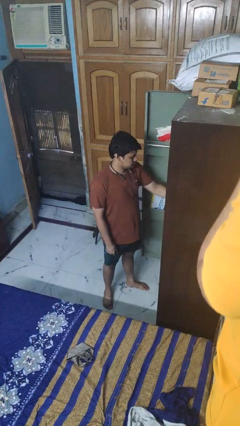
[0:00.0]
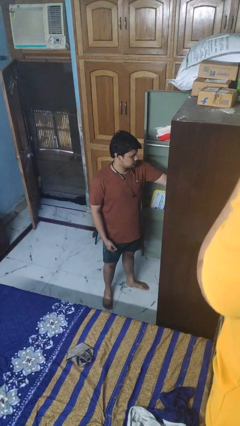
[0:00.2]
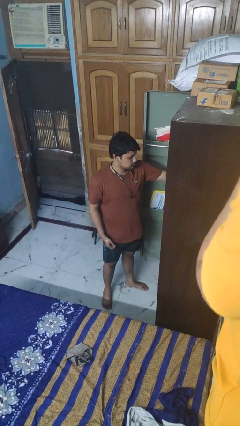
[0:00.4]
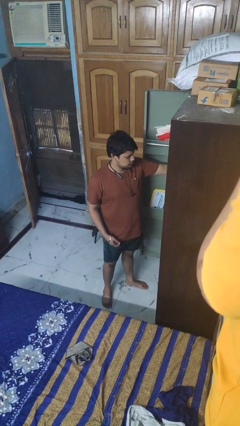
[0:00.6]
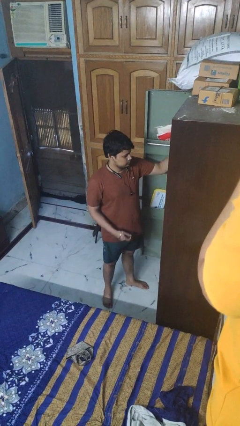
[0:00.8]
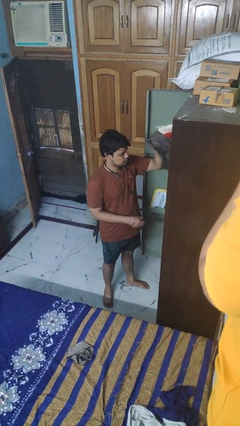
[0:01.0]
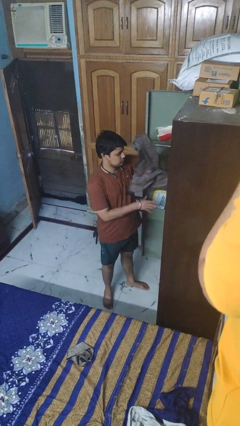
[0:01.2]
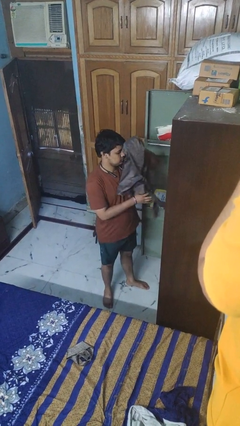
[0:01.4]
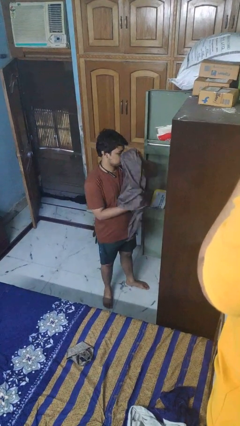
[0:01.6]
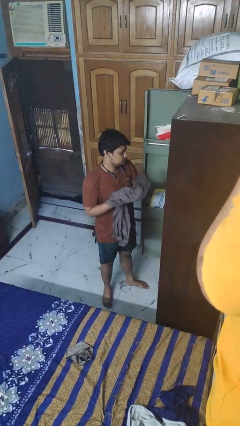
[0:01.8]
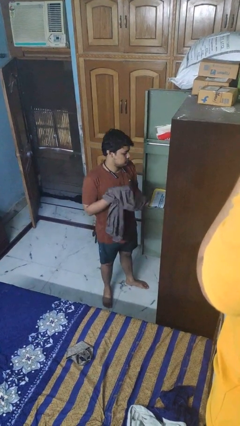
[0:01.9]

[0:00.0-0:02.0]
person takes clothes from dresser

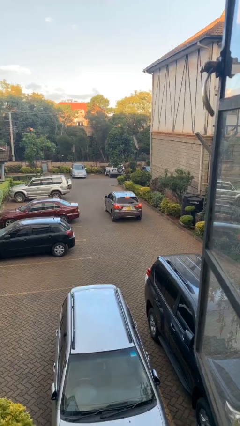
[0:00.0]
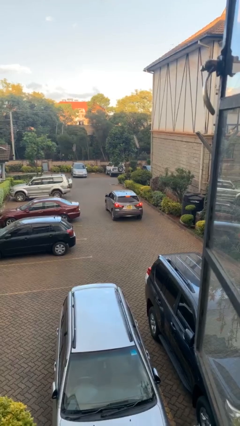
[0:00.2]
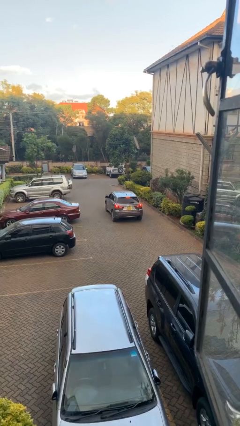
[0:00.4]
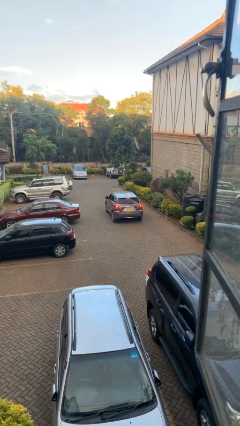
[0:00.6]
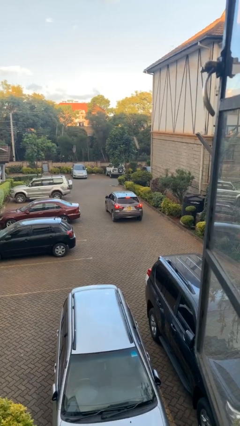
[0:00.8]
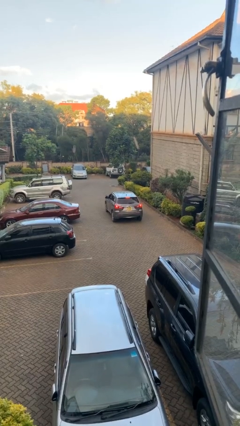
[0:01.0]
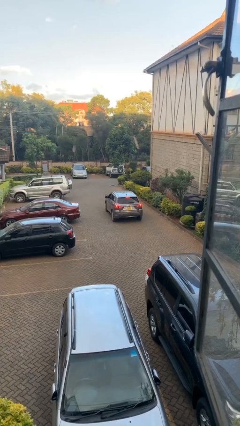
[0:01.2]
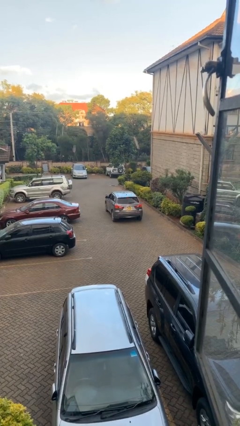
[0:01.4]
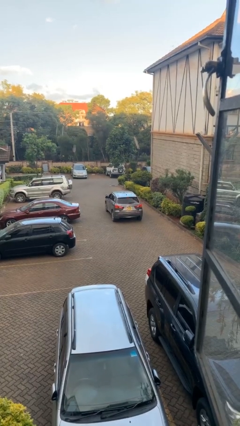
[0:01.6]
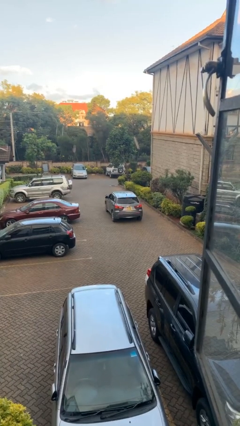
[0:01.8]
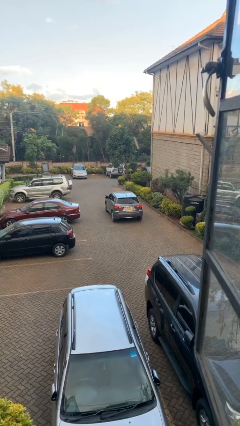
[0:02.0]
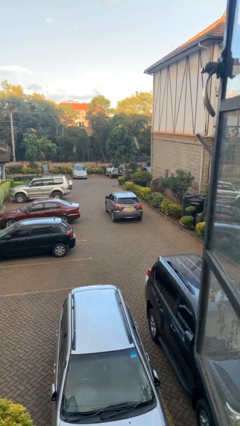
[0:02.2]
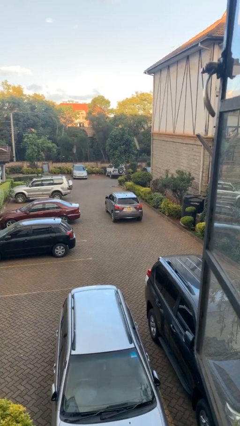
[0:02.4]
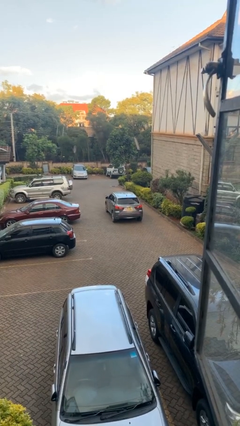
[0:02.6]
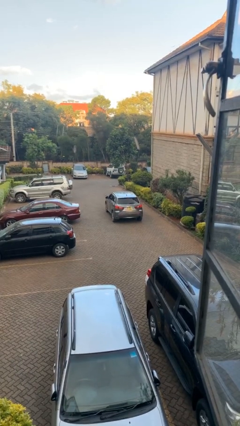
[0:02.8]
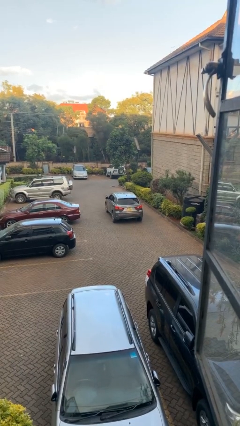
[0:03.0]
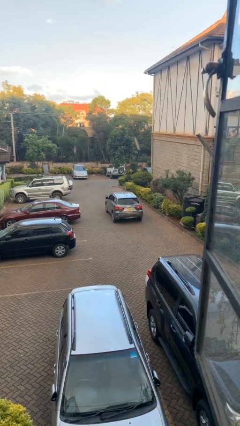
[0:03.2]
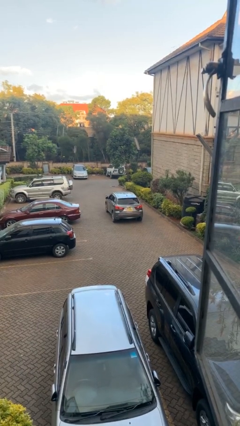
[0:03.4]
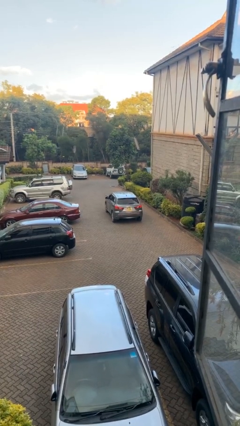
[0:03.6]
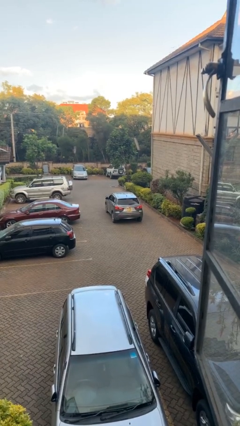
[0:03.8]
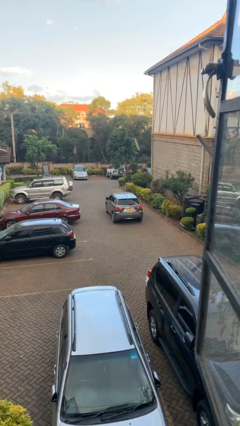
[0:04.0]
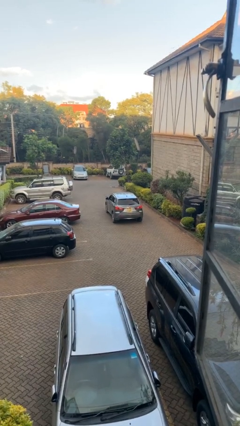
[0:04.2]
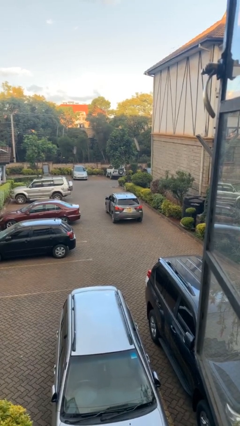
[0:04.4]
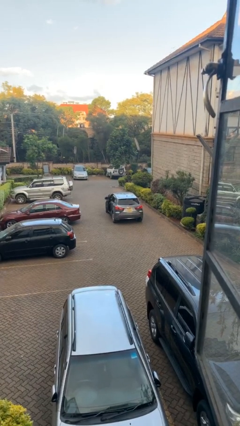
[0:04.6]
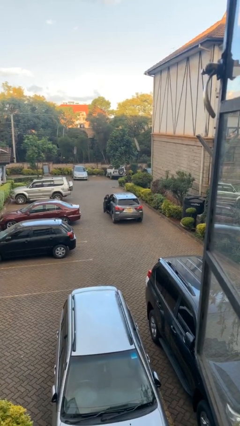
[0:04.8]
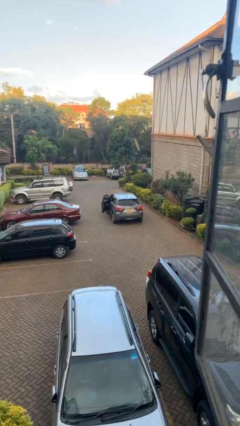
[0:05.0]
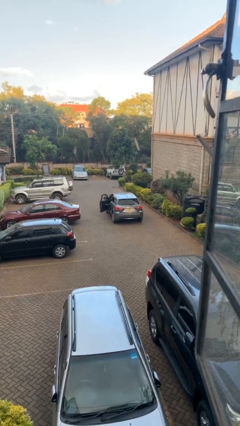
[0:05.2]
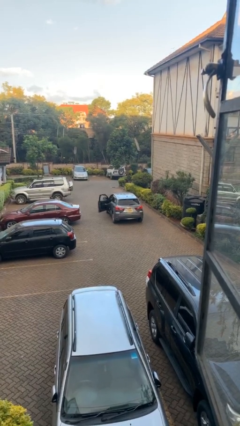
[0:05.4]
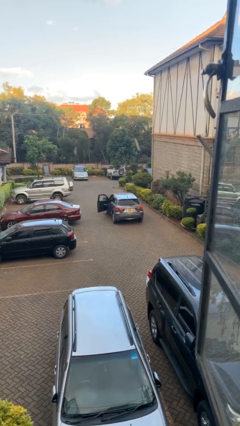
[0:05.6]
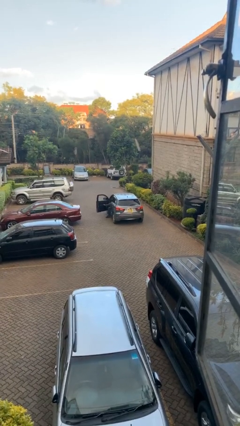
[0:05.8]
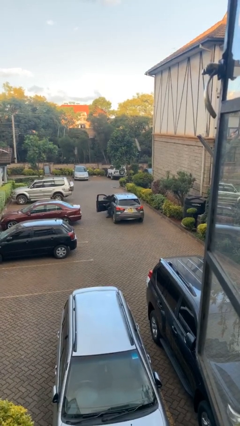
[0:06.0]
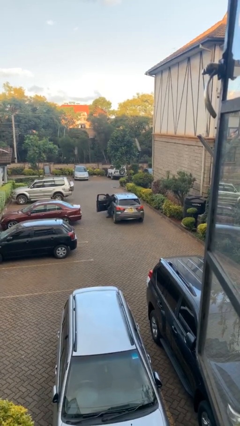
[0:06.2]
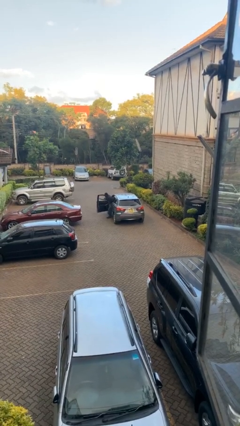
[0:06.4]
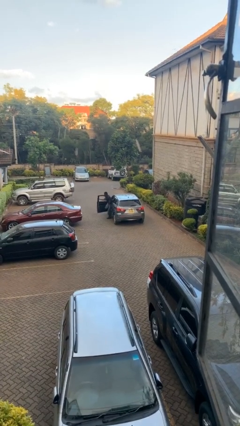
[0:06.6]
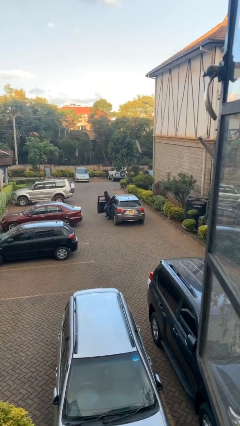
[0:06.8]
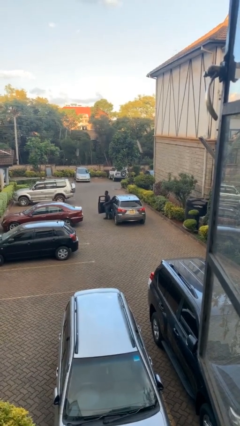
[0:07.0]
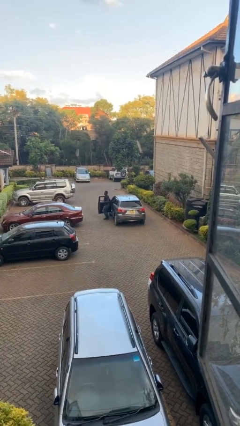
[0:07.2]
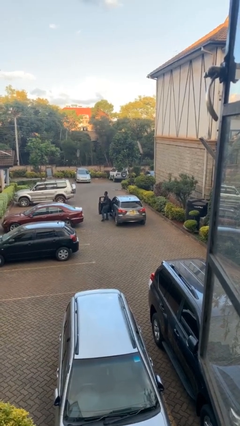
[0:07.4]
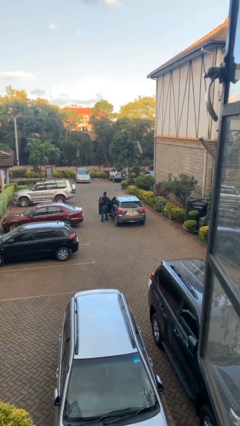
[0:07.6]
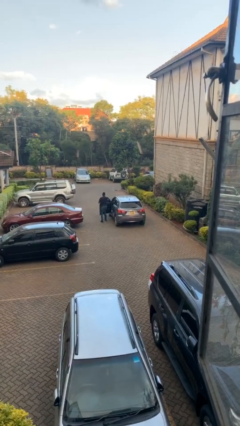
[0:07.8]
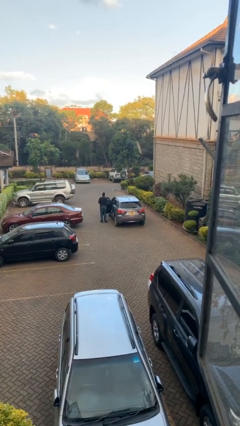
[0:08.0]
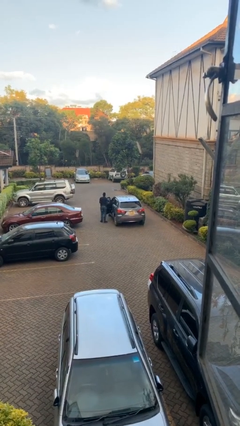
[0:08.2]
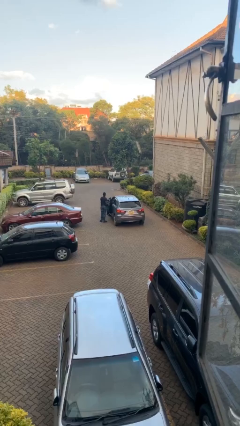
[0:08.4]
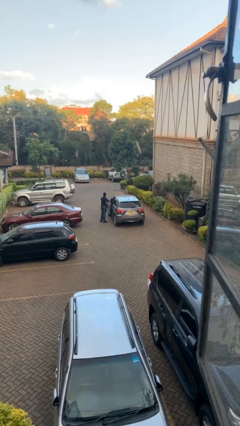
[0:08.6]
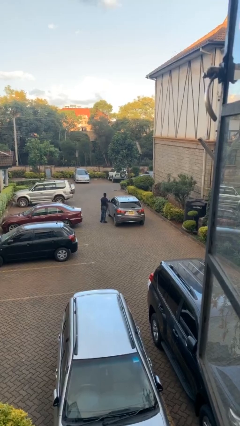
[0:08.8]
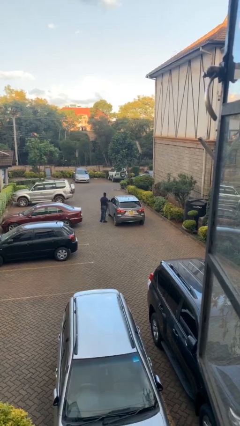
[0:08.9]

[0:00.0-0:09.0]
car drops off person

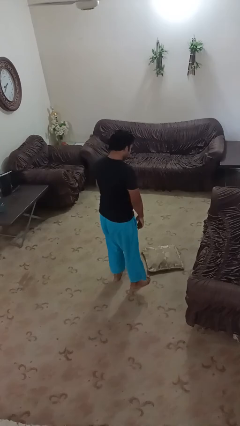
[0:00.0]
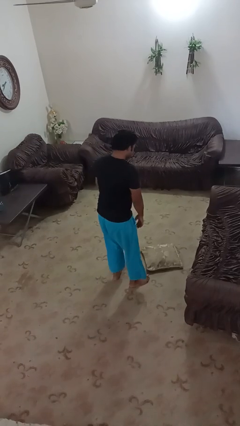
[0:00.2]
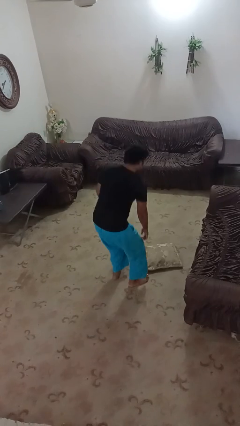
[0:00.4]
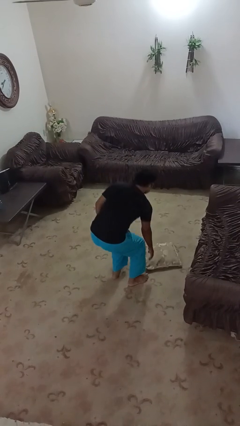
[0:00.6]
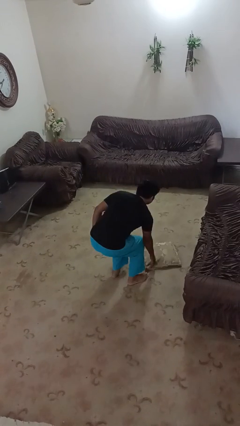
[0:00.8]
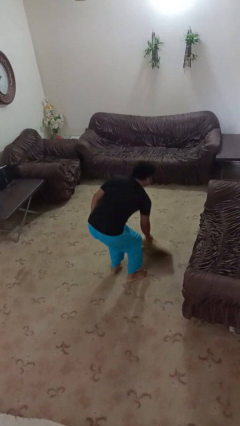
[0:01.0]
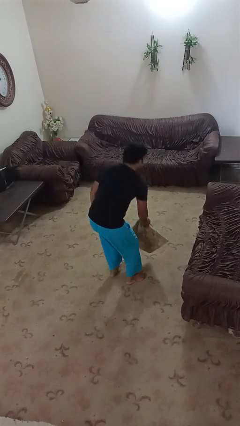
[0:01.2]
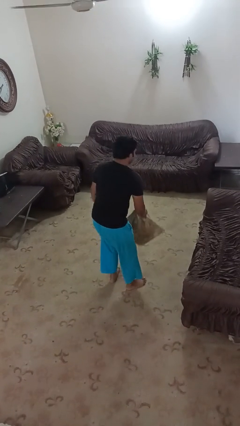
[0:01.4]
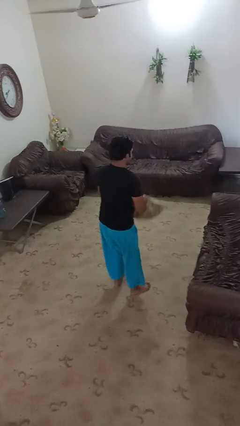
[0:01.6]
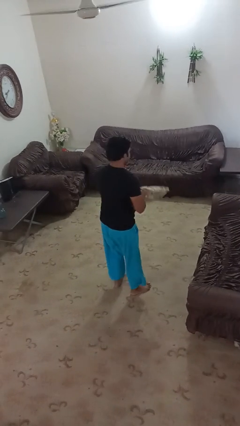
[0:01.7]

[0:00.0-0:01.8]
person picks up object from floor

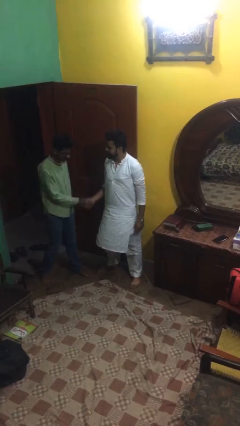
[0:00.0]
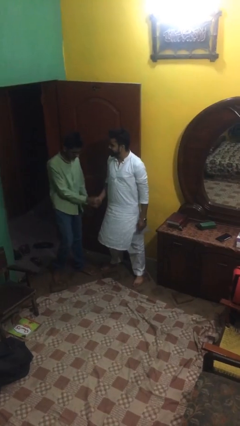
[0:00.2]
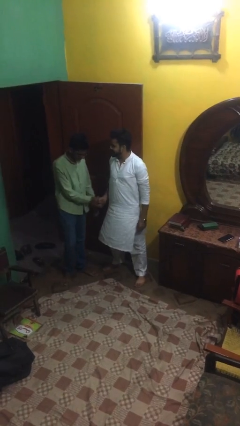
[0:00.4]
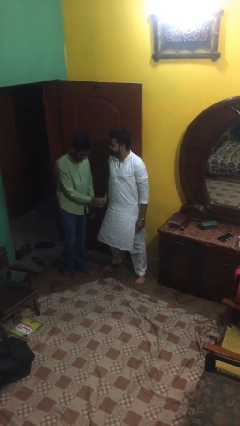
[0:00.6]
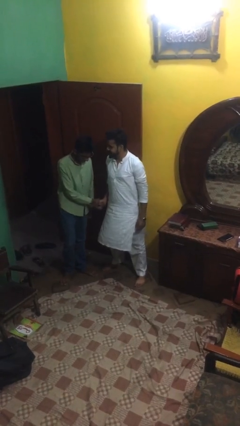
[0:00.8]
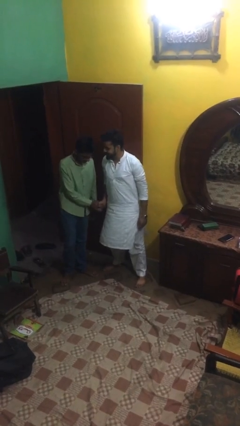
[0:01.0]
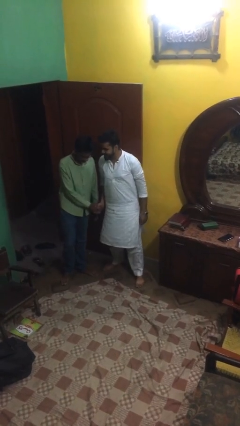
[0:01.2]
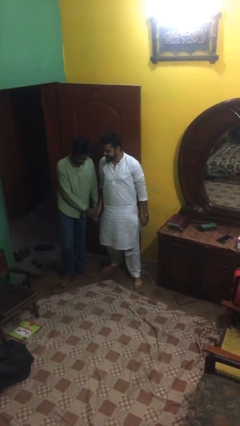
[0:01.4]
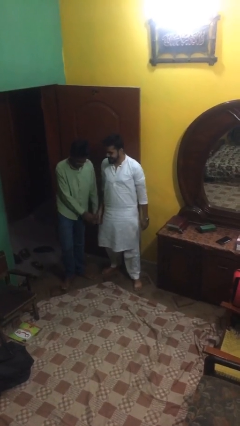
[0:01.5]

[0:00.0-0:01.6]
person shakes hand

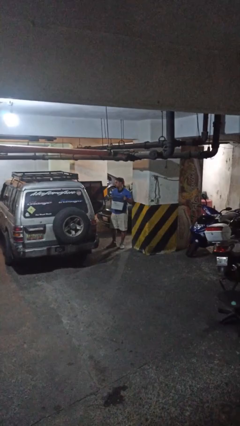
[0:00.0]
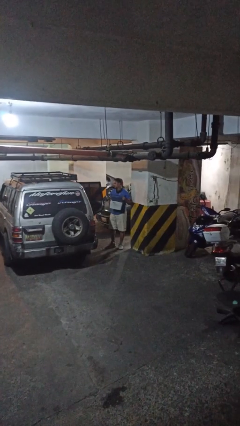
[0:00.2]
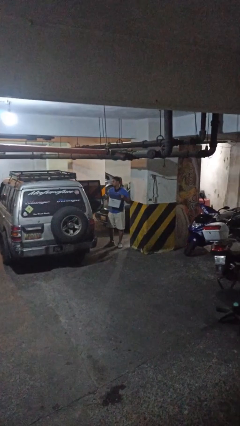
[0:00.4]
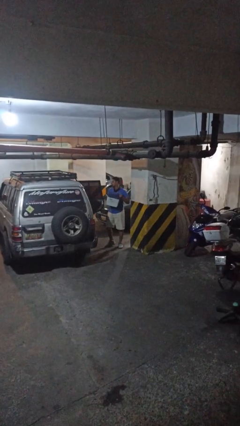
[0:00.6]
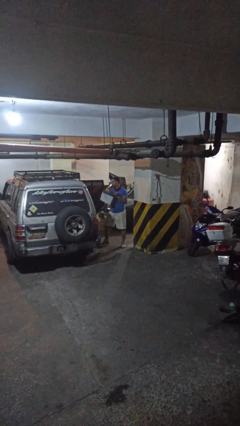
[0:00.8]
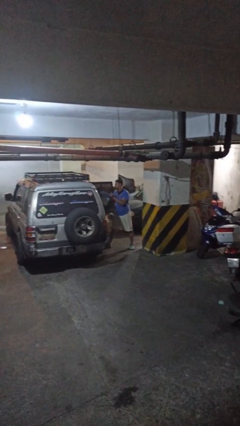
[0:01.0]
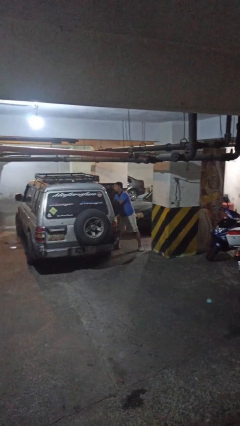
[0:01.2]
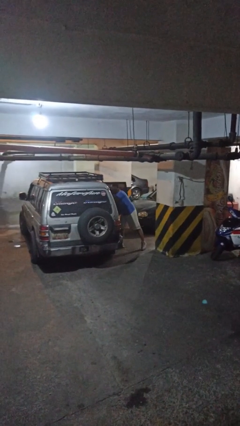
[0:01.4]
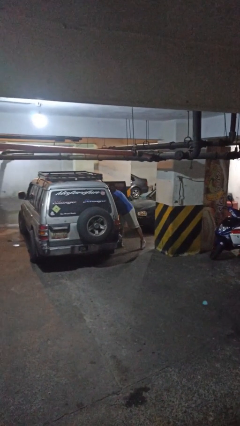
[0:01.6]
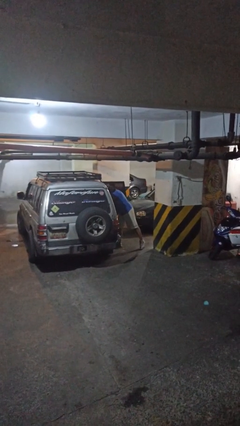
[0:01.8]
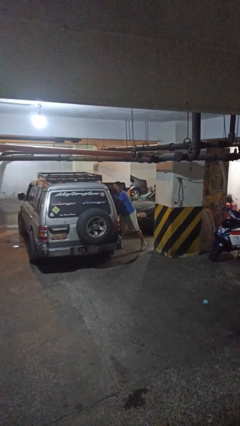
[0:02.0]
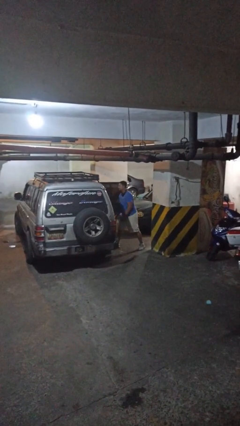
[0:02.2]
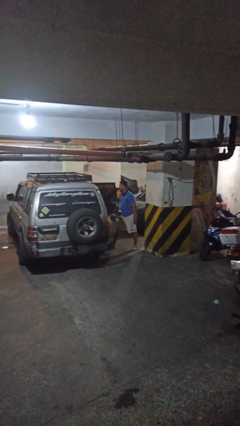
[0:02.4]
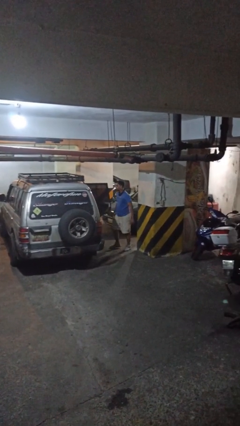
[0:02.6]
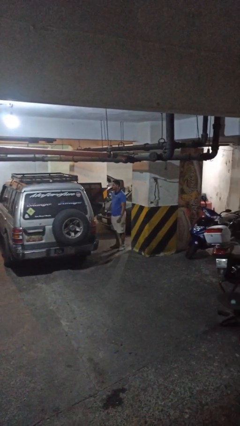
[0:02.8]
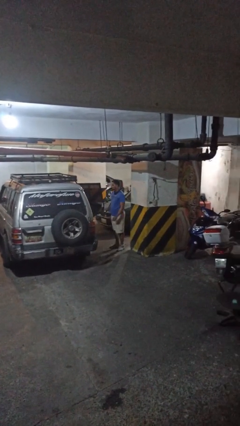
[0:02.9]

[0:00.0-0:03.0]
person loads car

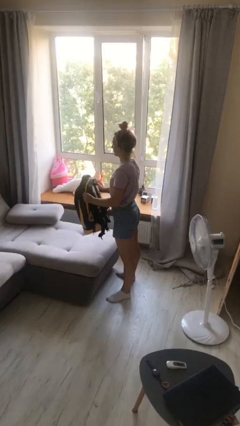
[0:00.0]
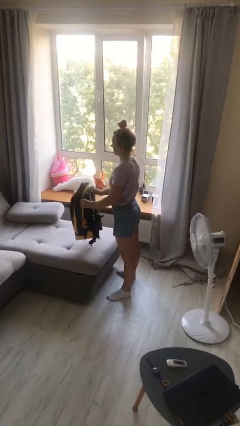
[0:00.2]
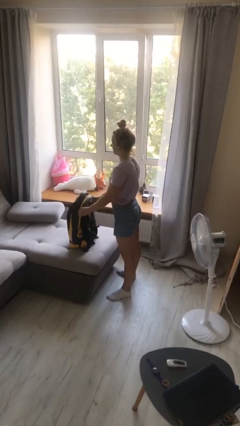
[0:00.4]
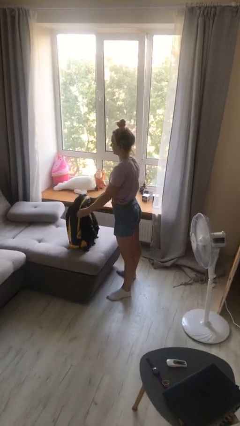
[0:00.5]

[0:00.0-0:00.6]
person puts down object on bed
